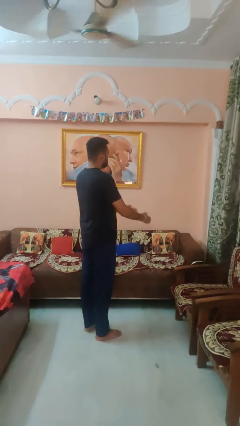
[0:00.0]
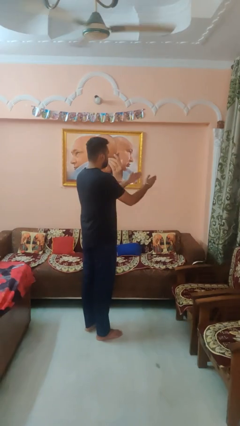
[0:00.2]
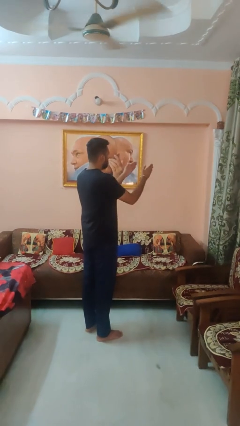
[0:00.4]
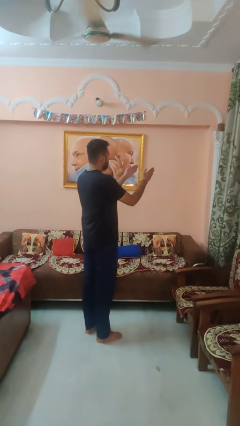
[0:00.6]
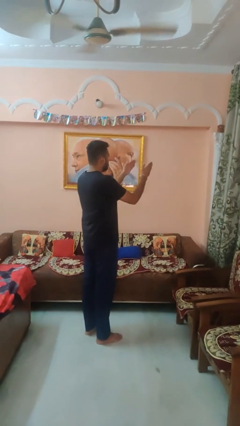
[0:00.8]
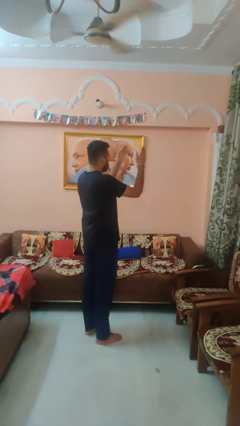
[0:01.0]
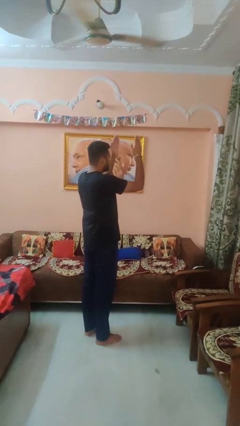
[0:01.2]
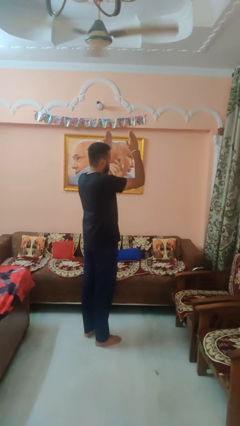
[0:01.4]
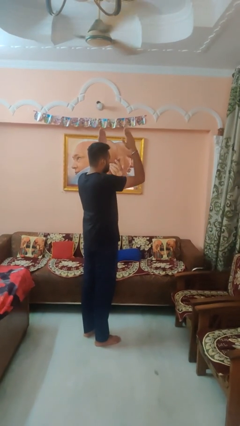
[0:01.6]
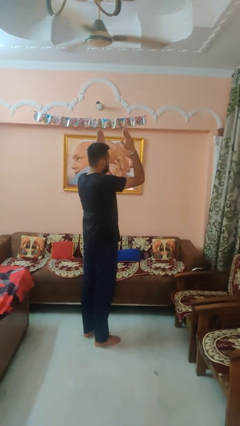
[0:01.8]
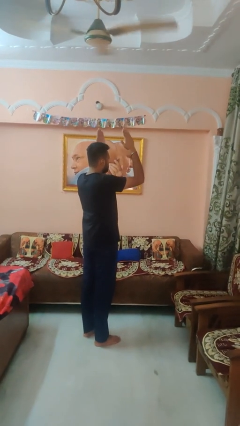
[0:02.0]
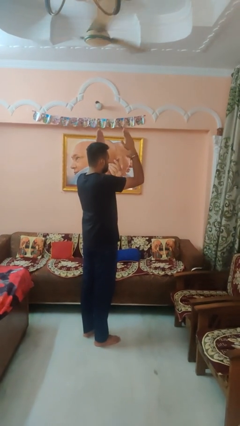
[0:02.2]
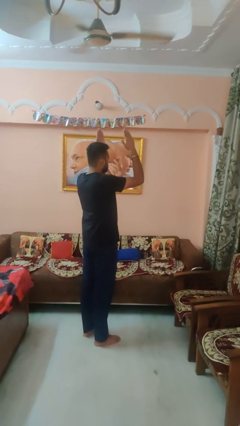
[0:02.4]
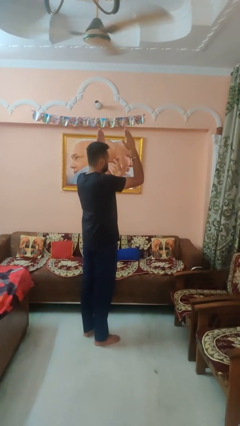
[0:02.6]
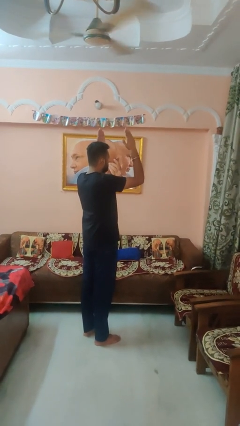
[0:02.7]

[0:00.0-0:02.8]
person gestures swipe up

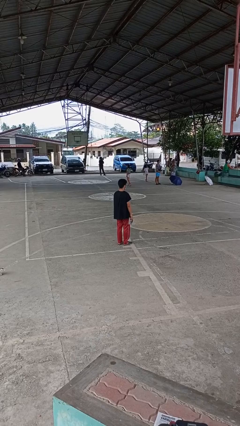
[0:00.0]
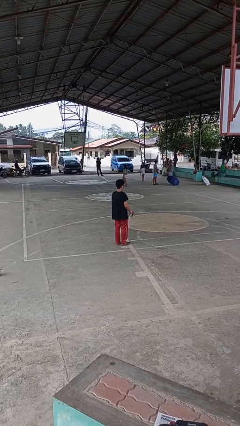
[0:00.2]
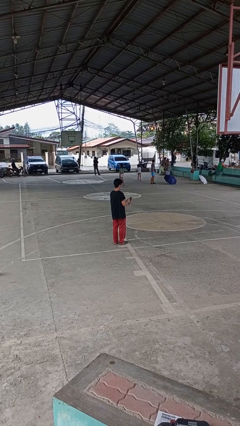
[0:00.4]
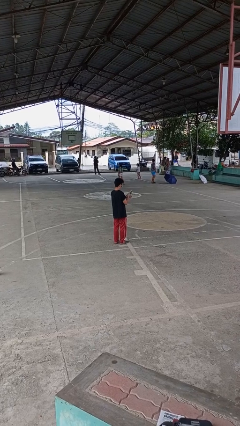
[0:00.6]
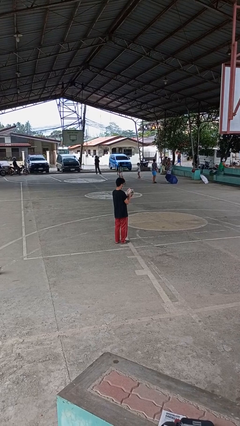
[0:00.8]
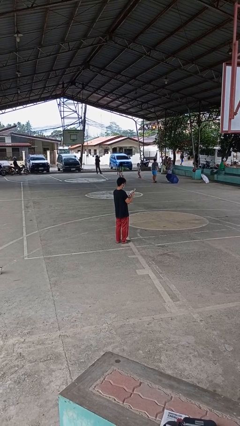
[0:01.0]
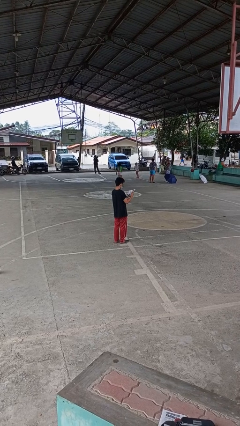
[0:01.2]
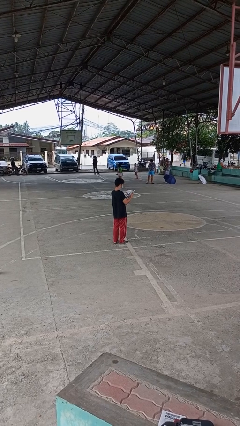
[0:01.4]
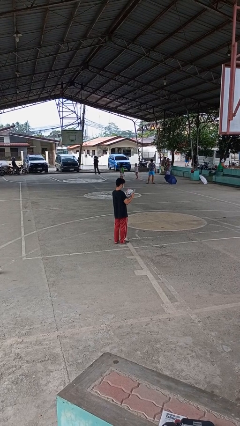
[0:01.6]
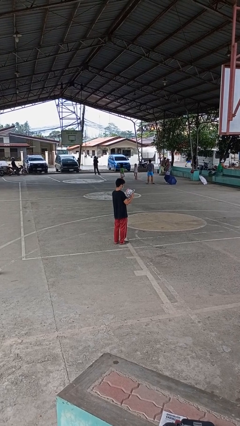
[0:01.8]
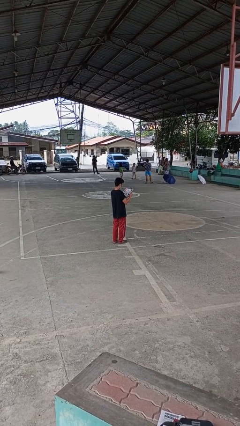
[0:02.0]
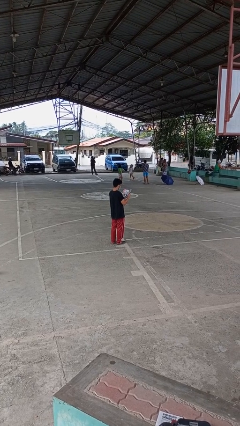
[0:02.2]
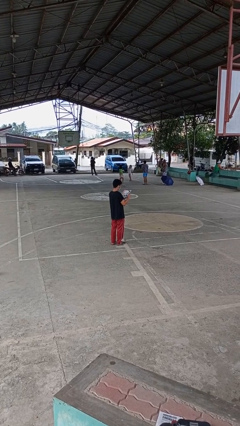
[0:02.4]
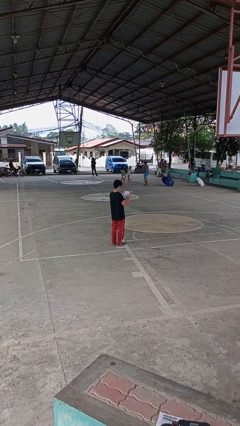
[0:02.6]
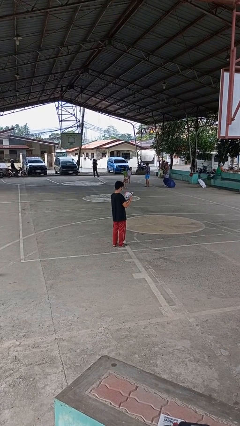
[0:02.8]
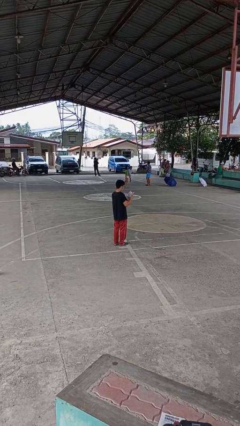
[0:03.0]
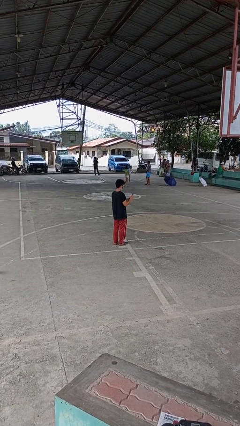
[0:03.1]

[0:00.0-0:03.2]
person reads magazine

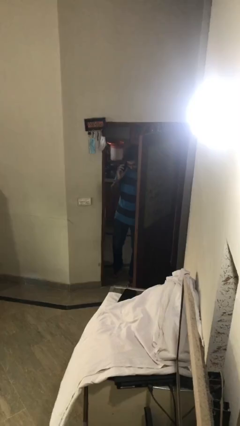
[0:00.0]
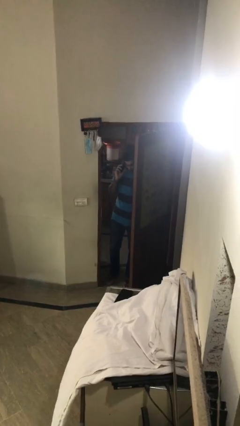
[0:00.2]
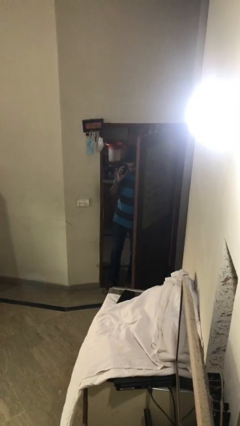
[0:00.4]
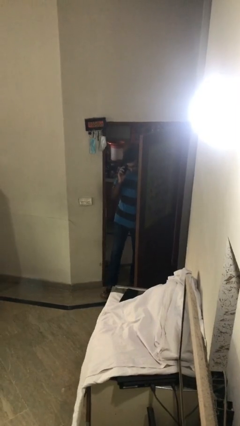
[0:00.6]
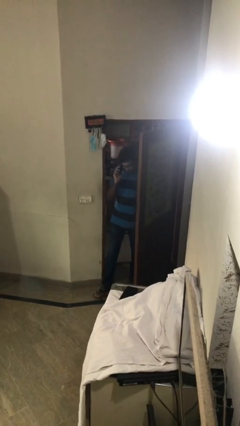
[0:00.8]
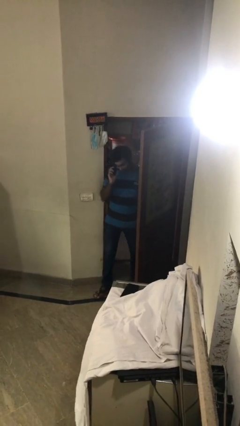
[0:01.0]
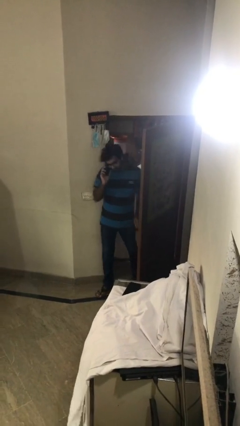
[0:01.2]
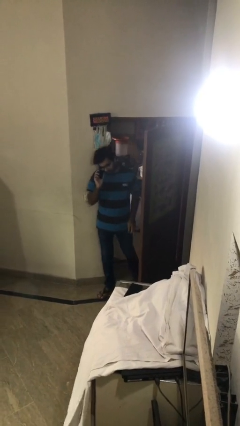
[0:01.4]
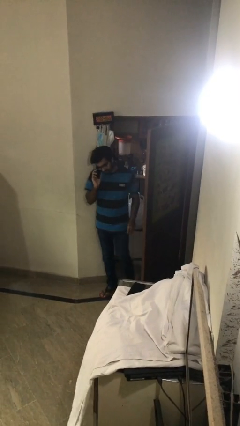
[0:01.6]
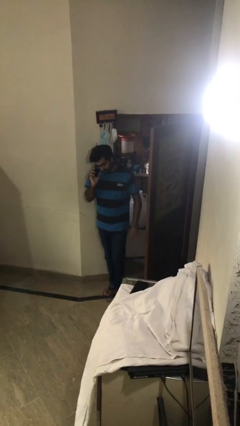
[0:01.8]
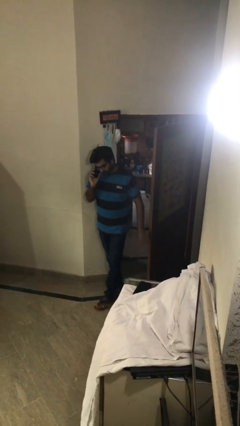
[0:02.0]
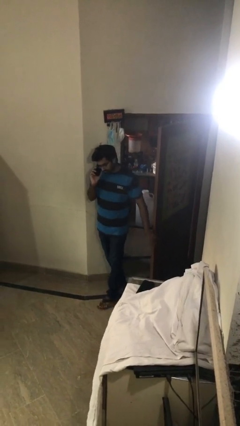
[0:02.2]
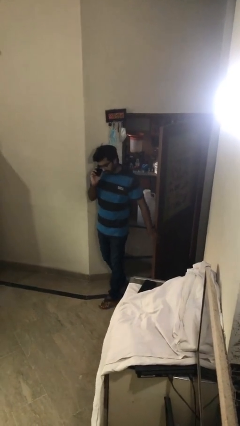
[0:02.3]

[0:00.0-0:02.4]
person enters scene through structure

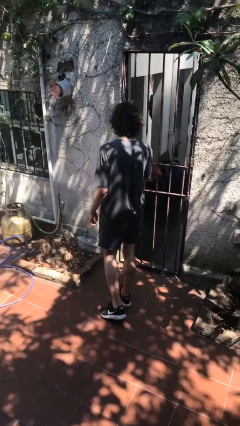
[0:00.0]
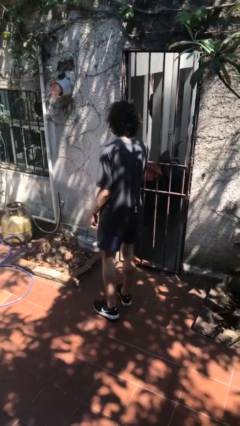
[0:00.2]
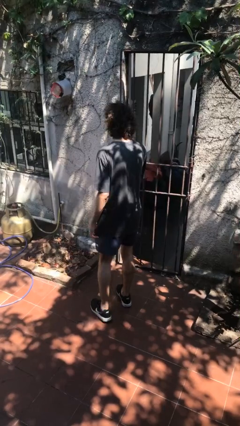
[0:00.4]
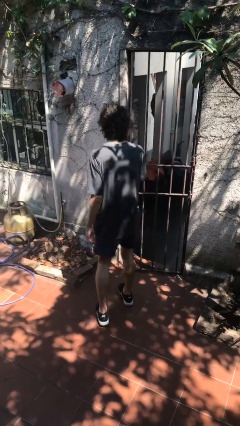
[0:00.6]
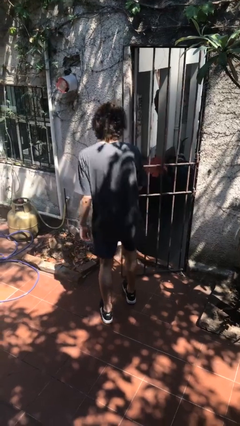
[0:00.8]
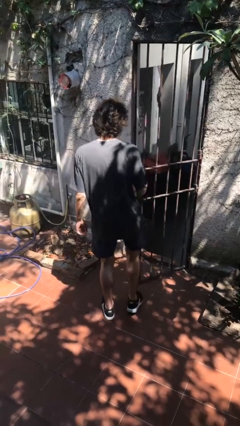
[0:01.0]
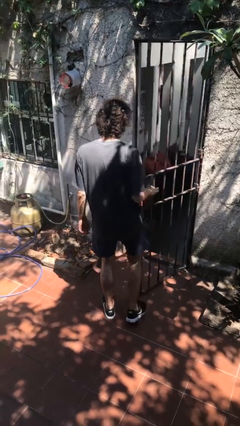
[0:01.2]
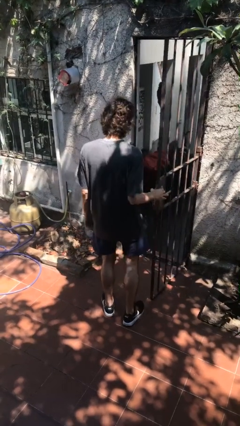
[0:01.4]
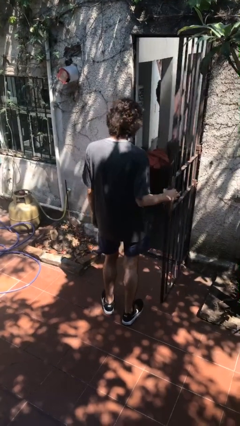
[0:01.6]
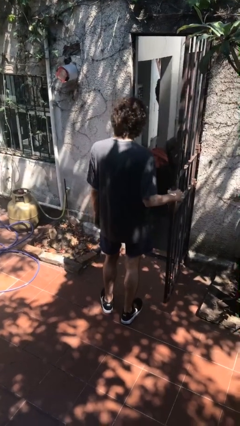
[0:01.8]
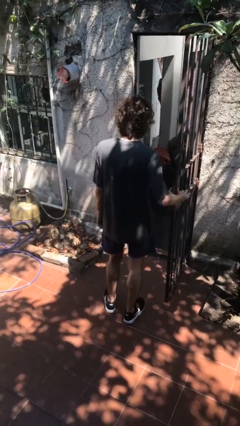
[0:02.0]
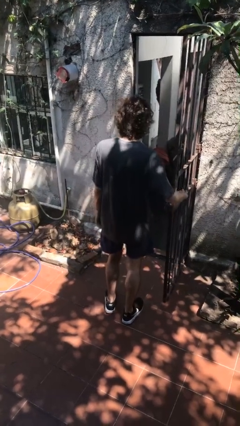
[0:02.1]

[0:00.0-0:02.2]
person opens facility door

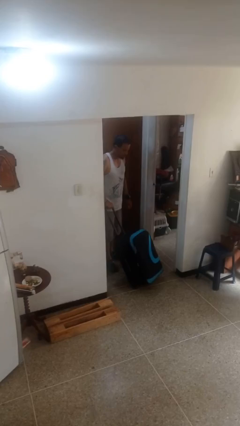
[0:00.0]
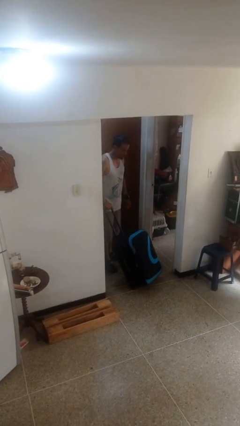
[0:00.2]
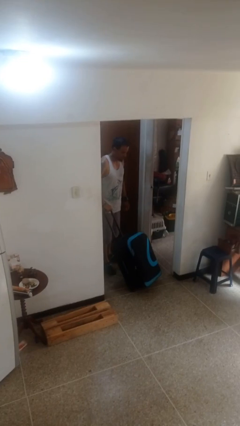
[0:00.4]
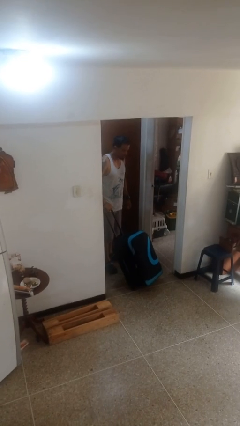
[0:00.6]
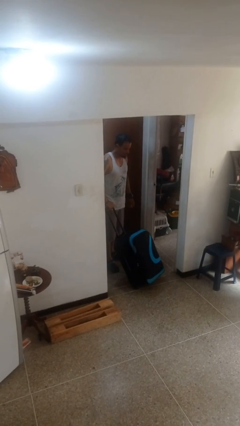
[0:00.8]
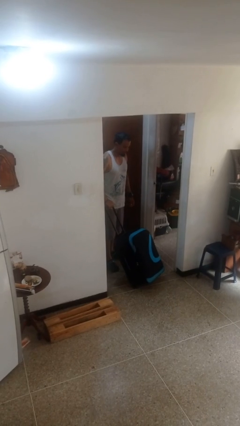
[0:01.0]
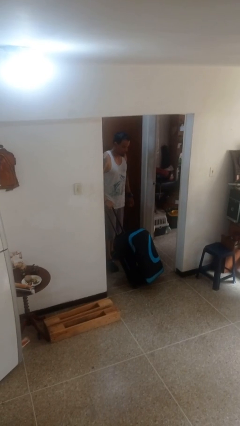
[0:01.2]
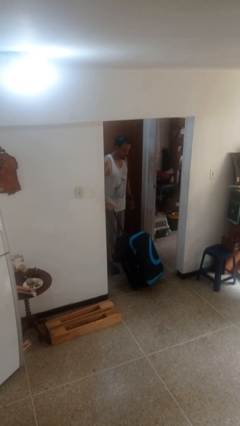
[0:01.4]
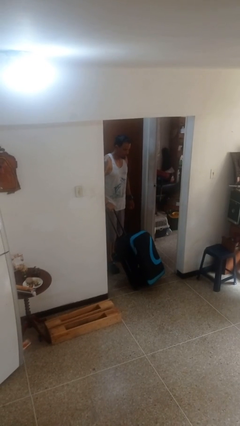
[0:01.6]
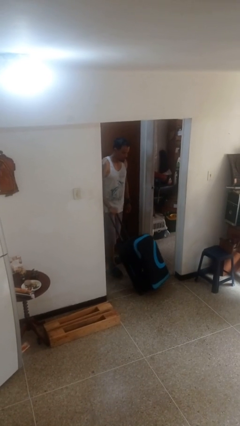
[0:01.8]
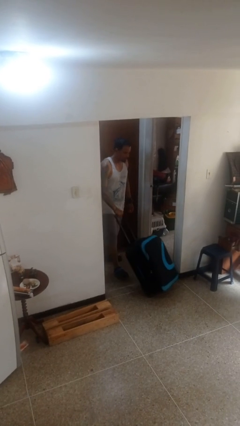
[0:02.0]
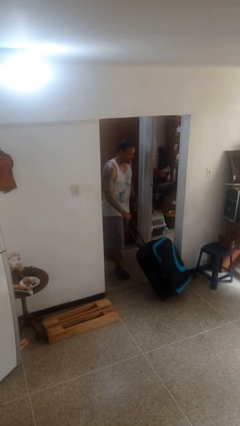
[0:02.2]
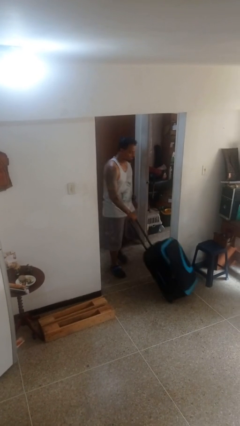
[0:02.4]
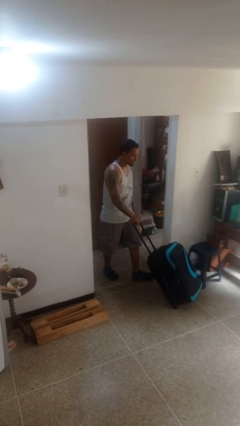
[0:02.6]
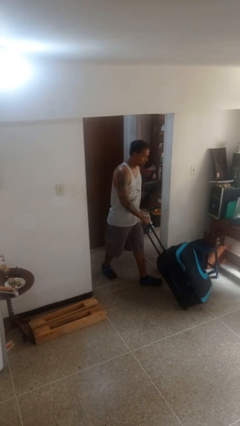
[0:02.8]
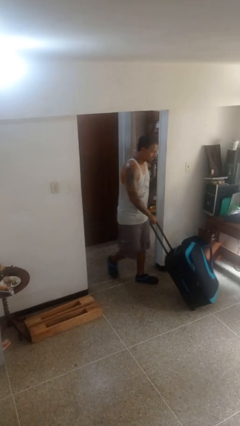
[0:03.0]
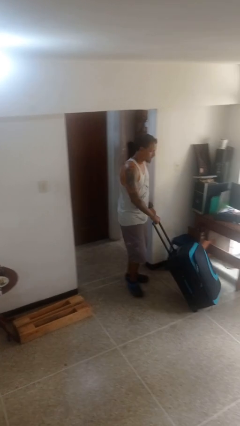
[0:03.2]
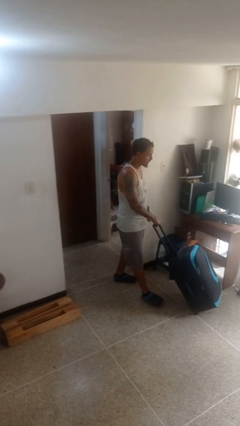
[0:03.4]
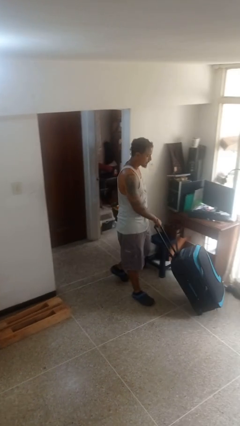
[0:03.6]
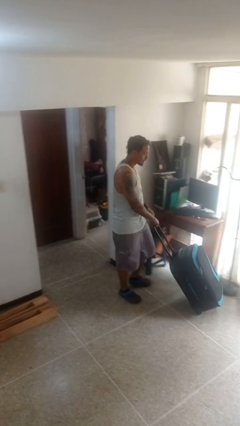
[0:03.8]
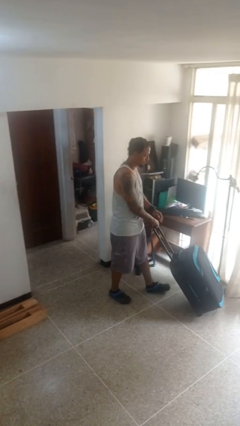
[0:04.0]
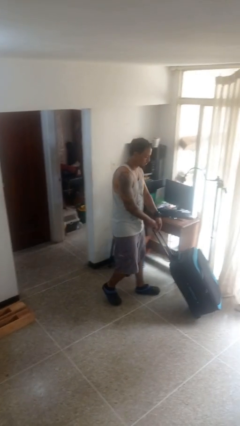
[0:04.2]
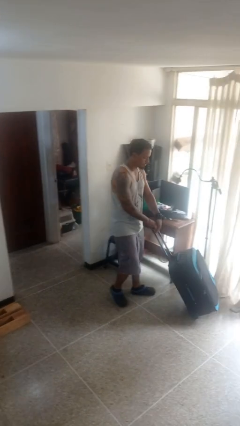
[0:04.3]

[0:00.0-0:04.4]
person pushes wheeled cart

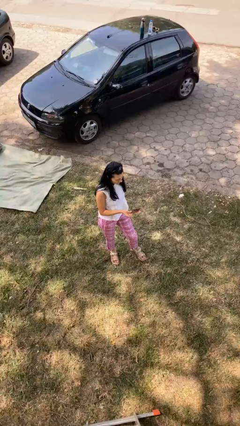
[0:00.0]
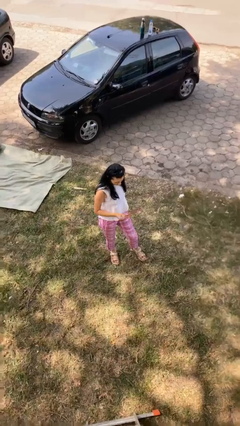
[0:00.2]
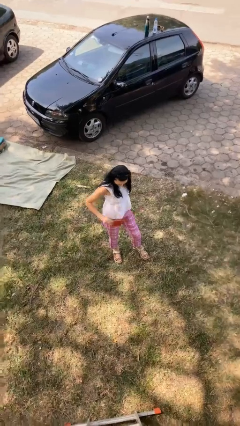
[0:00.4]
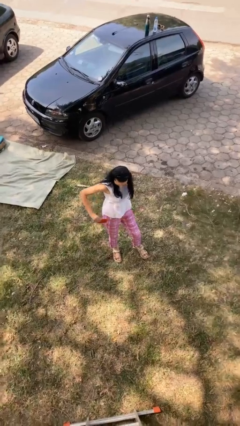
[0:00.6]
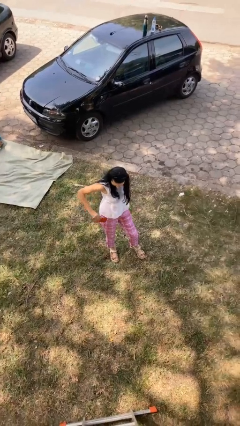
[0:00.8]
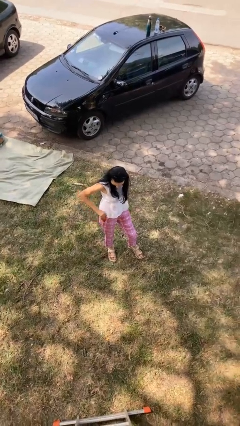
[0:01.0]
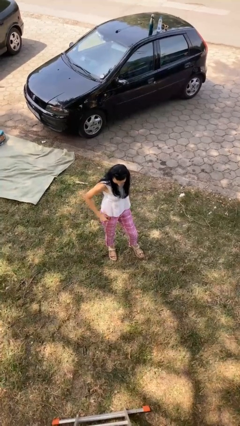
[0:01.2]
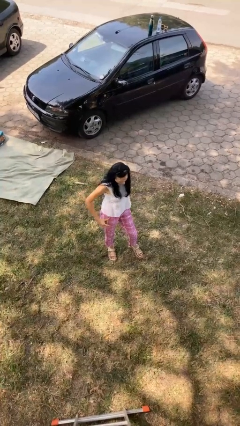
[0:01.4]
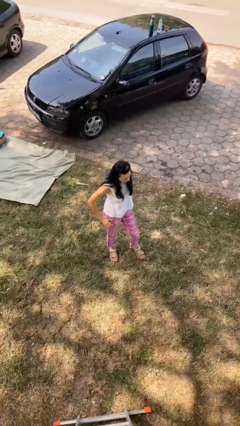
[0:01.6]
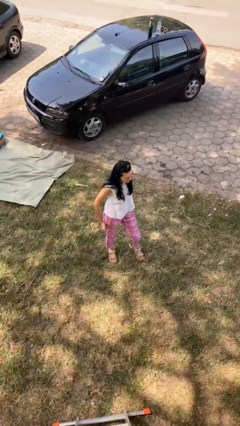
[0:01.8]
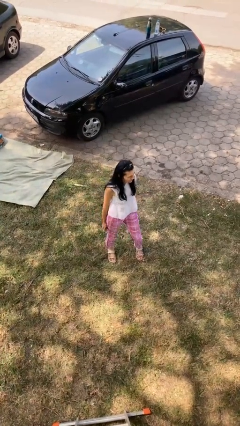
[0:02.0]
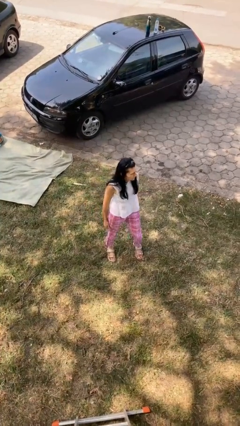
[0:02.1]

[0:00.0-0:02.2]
person puts phone into pocket
